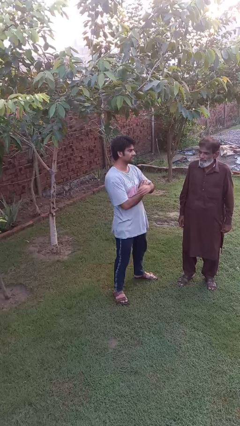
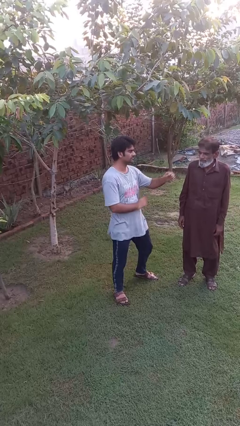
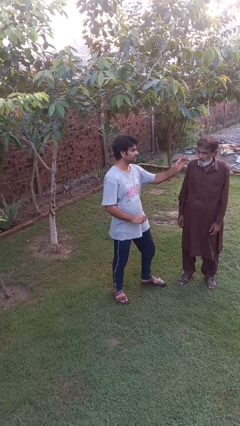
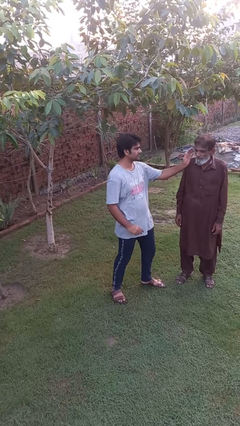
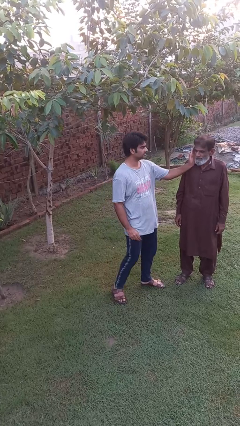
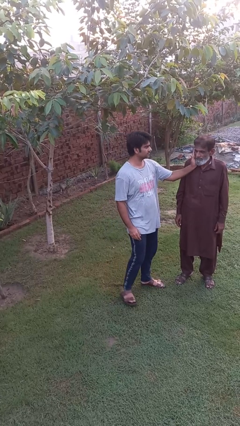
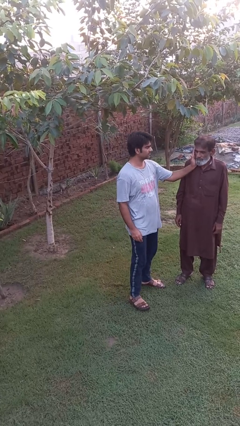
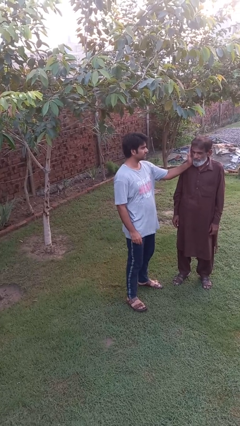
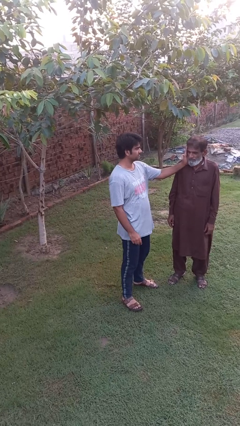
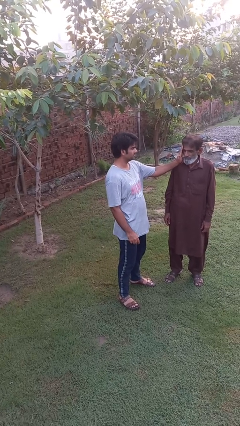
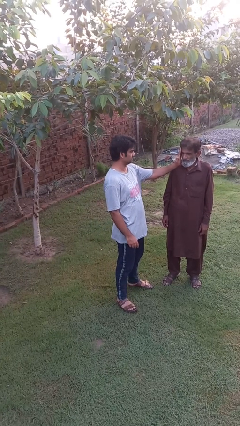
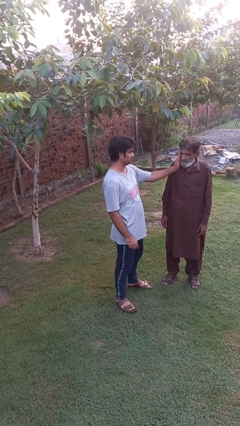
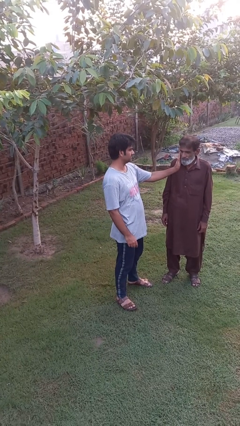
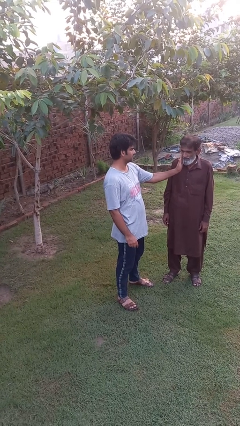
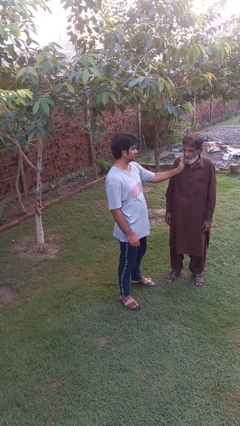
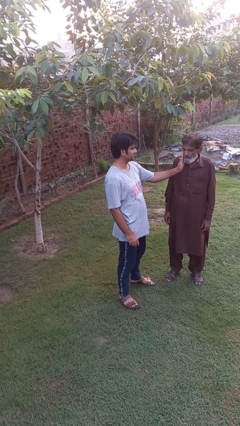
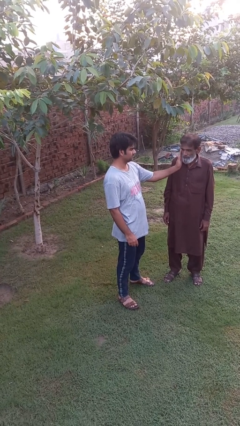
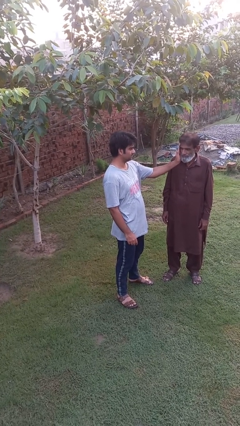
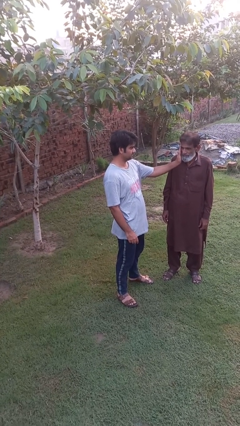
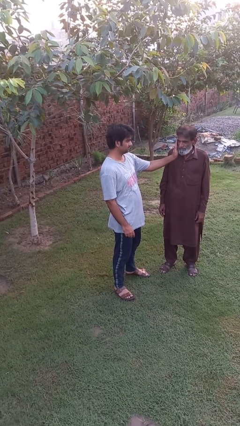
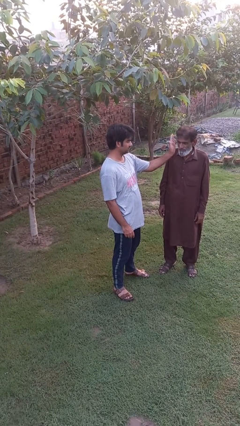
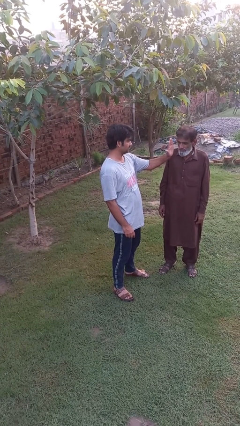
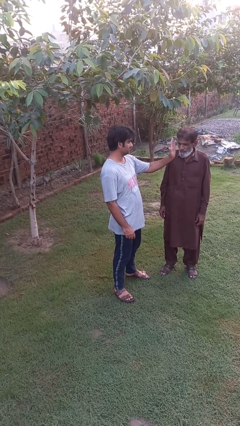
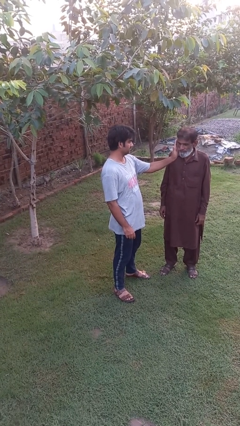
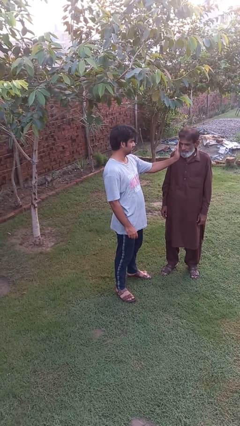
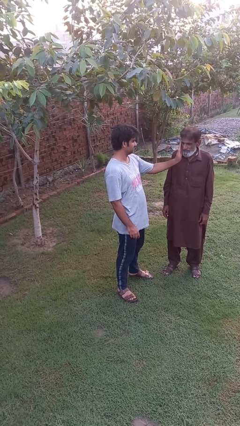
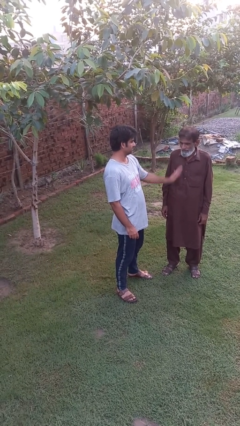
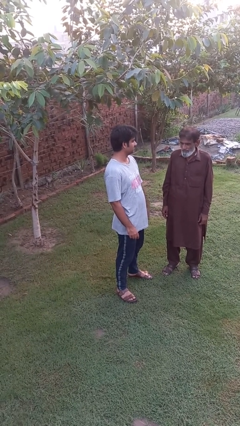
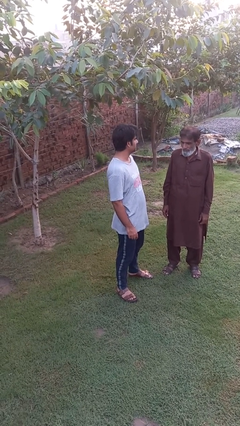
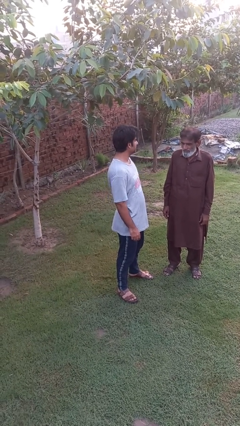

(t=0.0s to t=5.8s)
person touches face of person

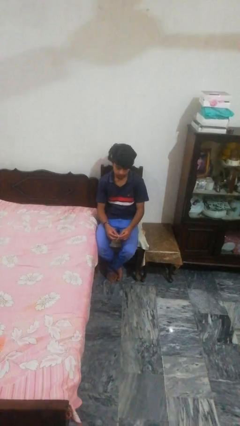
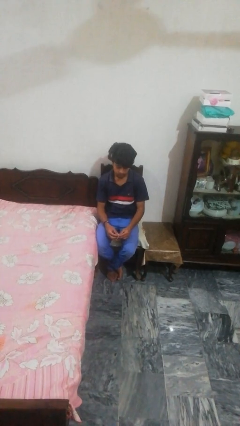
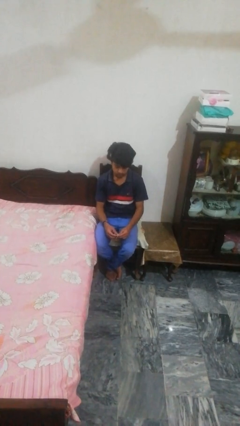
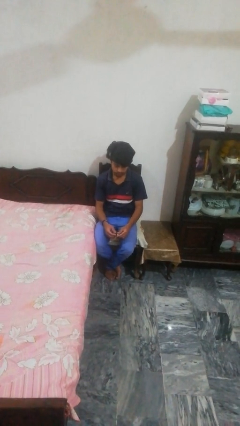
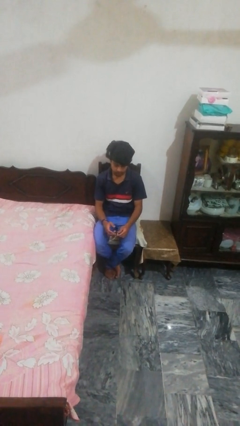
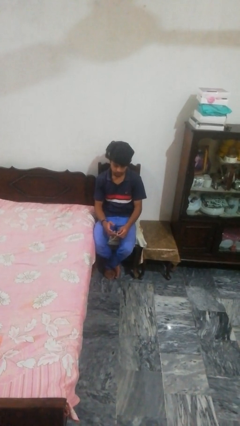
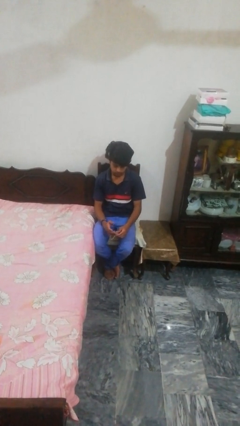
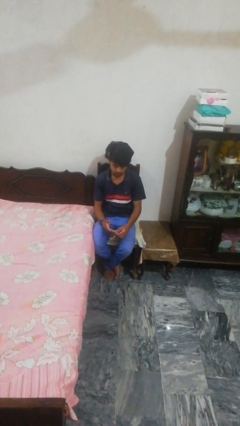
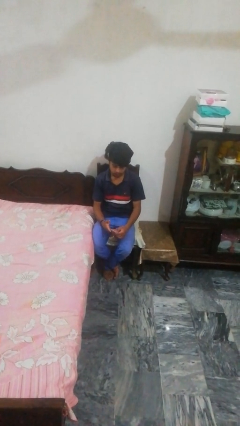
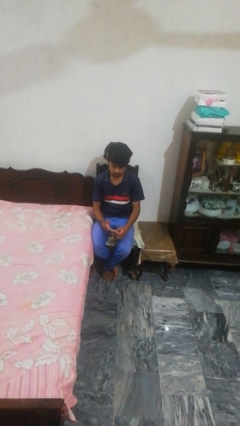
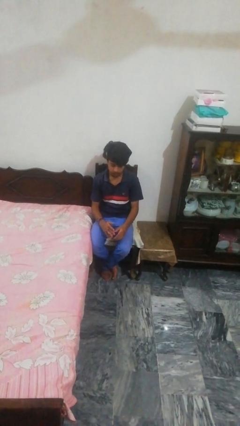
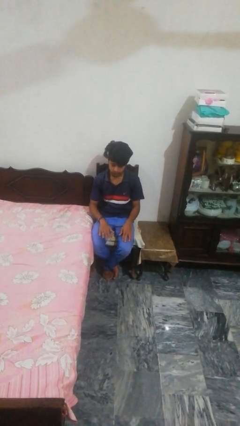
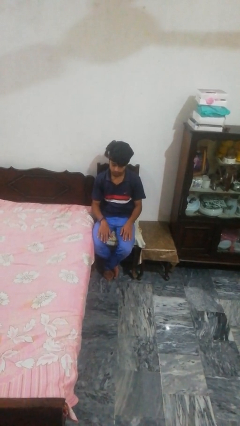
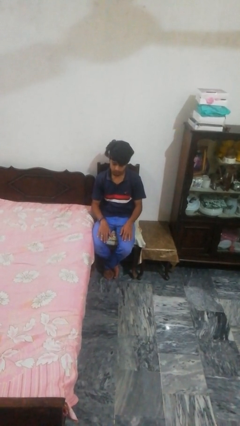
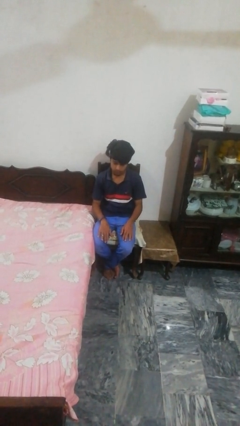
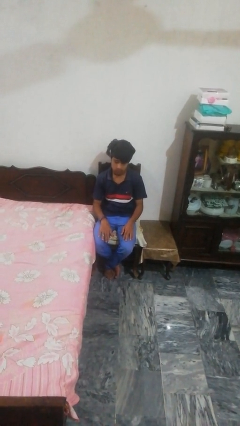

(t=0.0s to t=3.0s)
person puts on ring

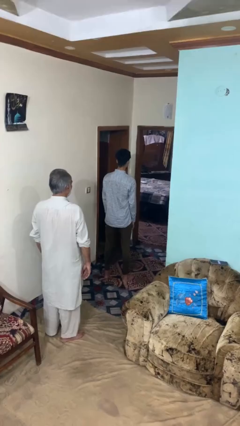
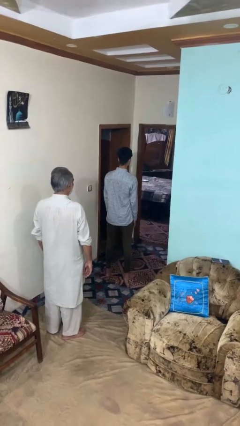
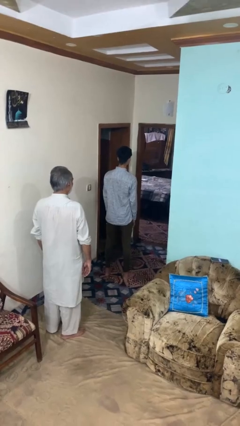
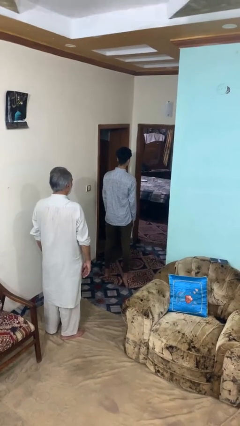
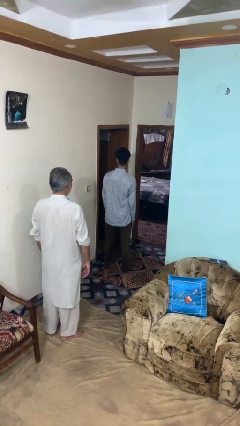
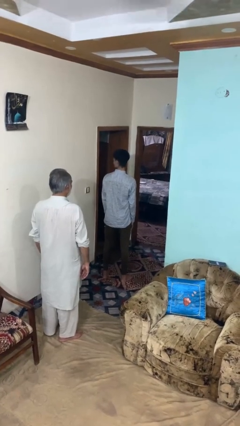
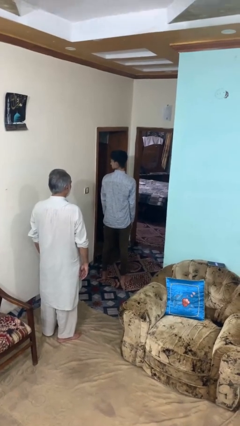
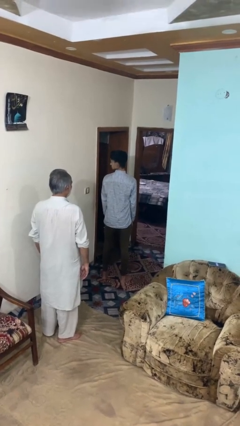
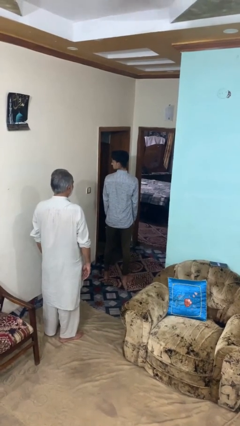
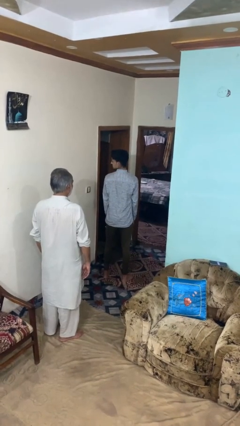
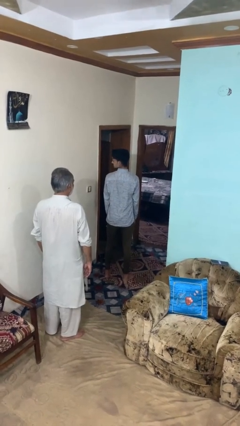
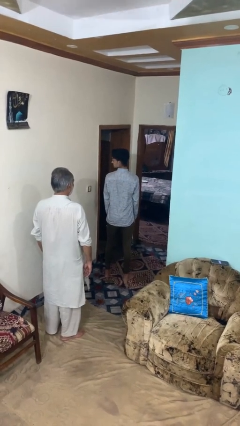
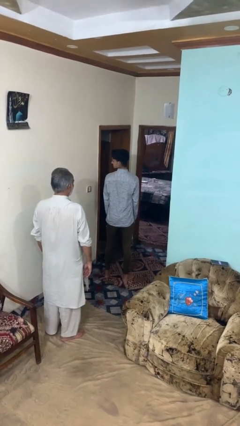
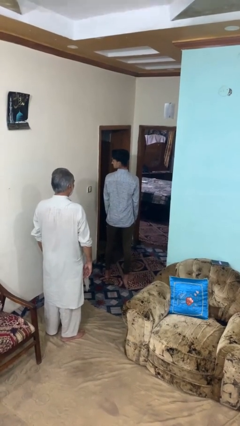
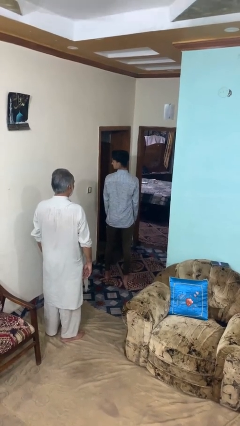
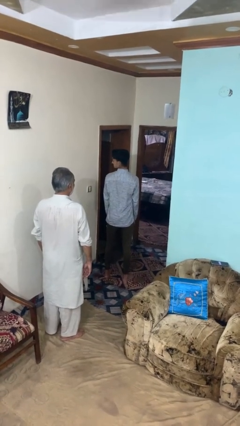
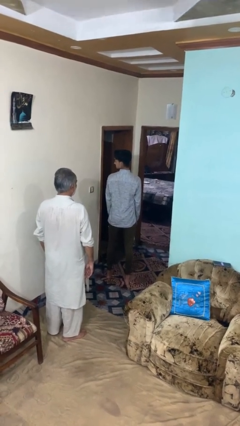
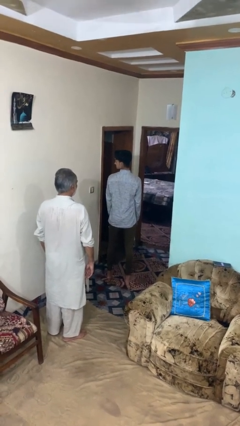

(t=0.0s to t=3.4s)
person looks over shoulder

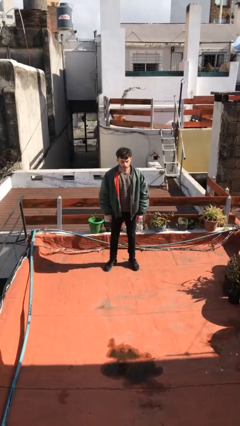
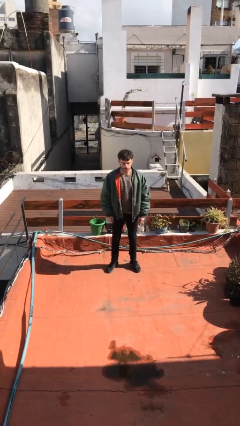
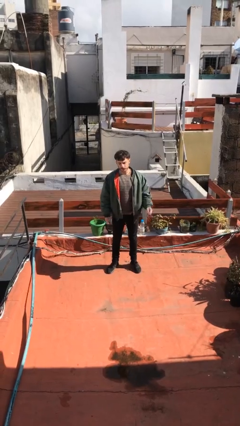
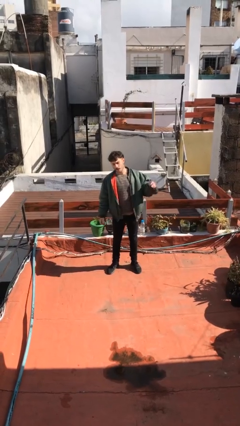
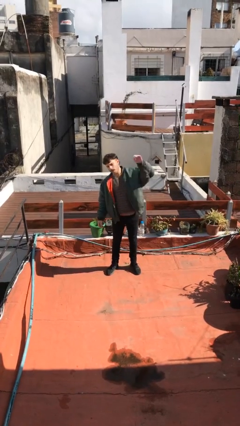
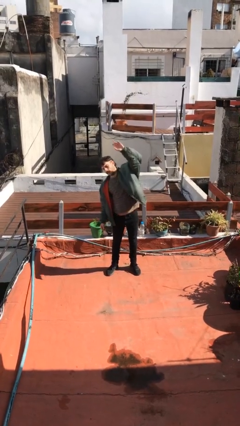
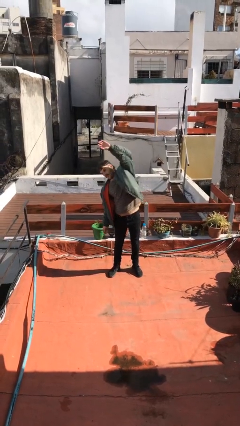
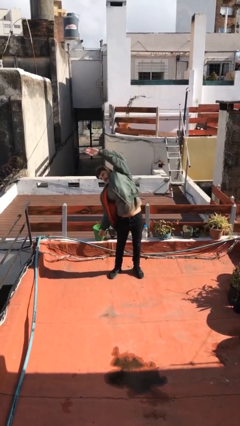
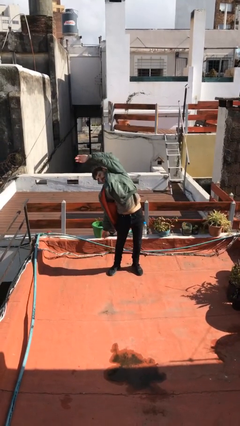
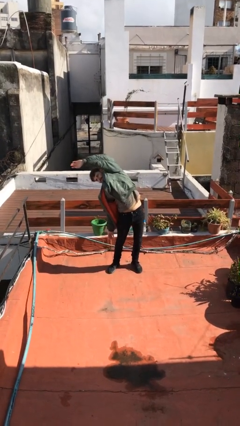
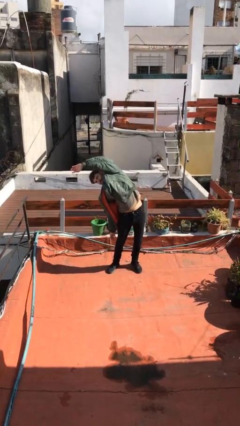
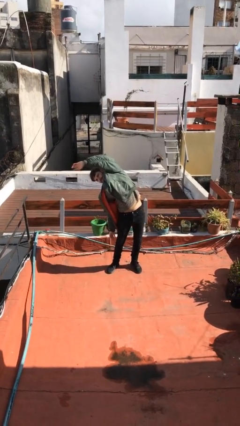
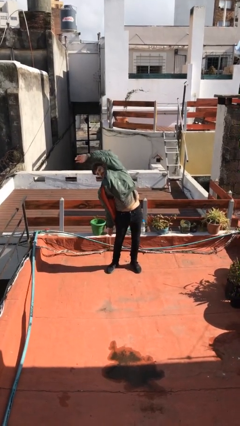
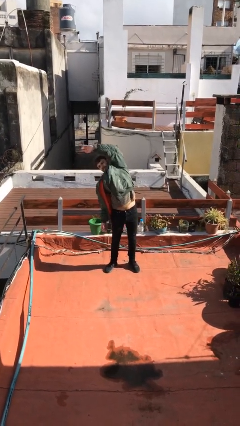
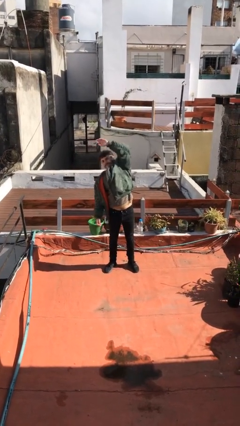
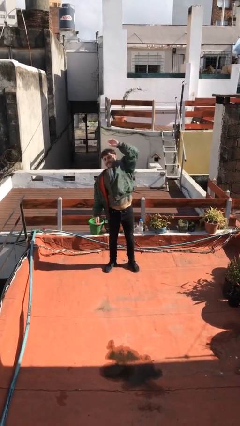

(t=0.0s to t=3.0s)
person stretches arms to side

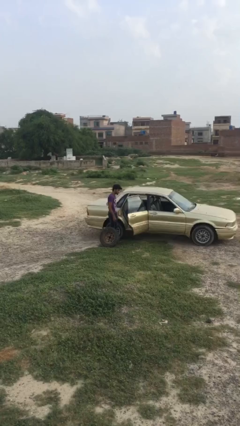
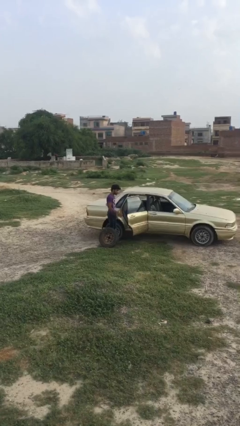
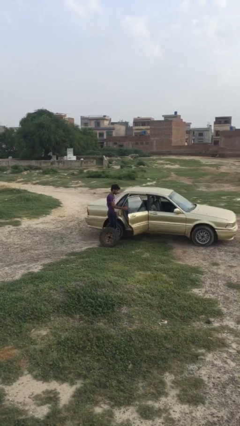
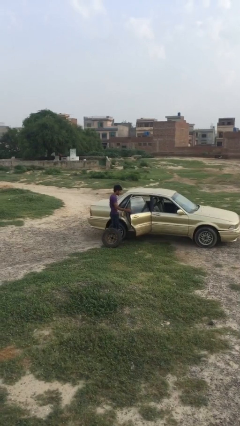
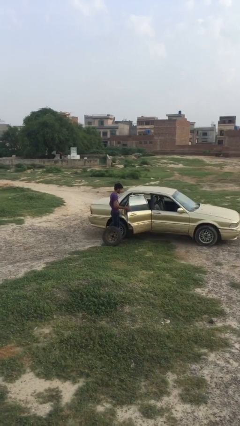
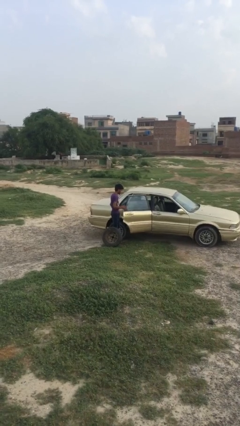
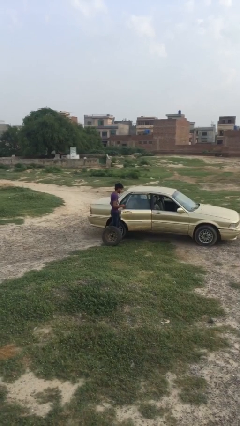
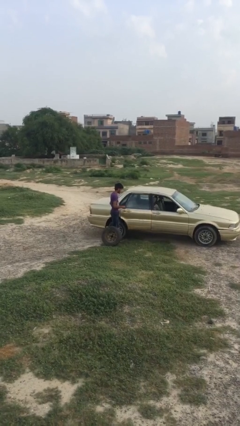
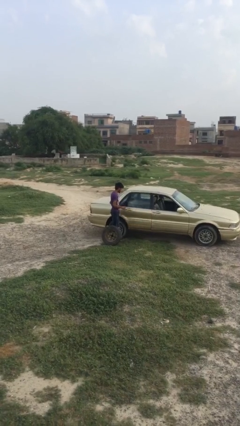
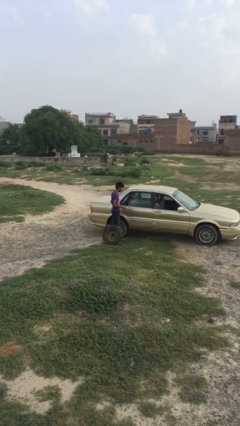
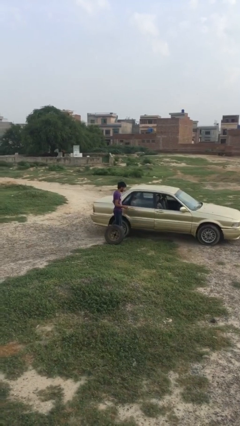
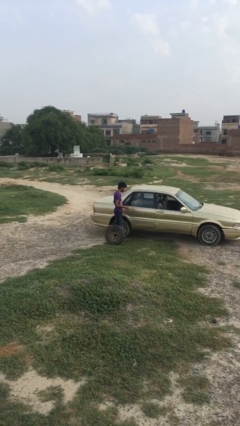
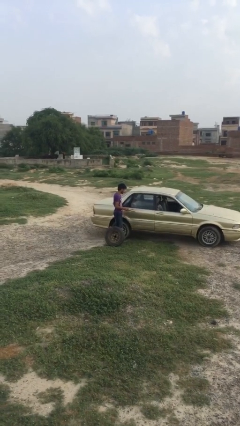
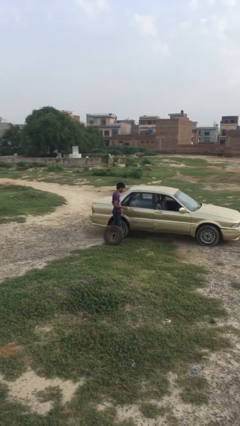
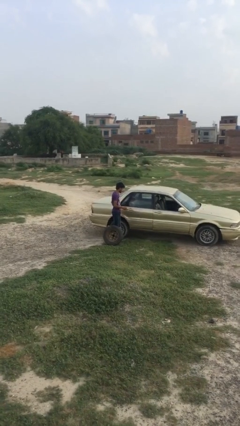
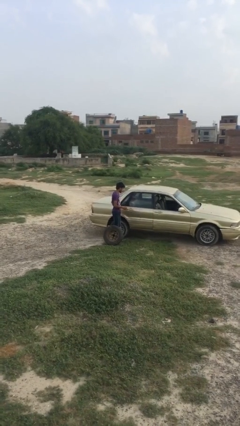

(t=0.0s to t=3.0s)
person closes car door
